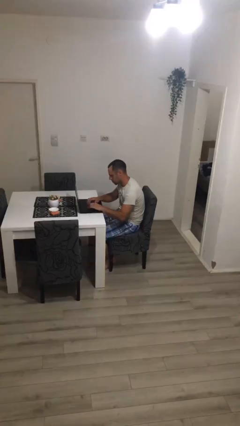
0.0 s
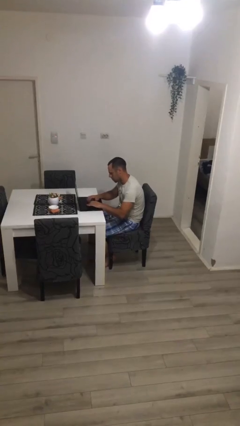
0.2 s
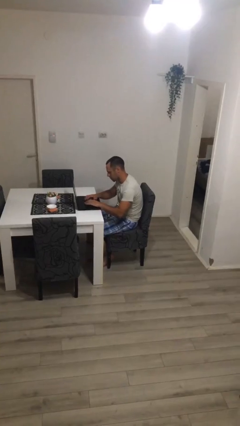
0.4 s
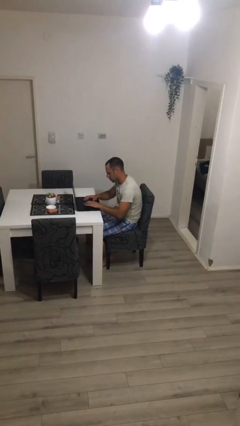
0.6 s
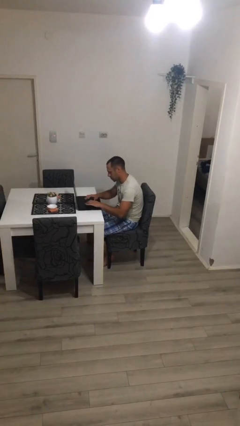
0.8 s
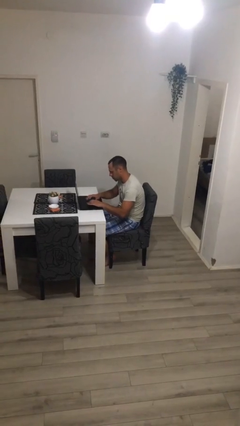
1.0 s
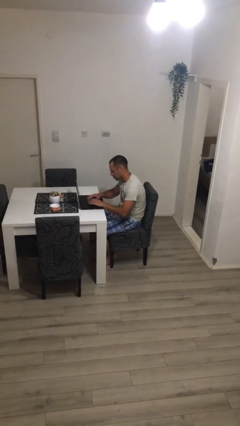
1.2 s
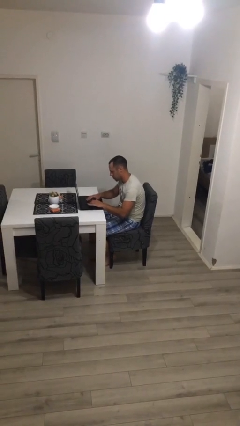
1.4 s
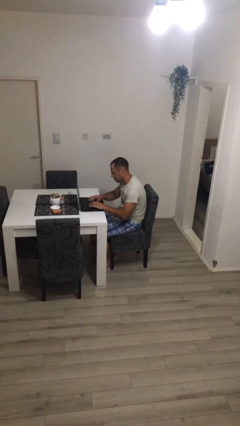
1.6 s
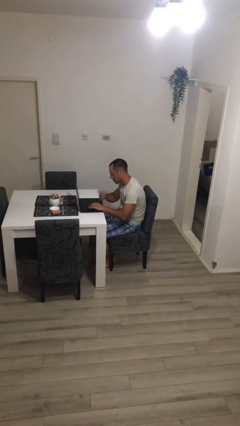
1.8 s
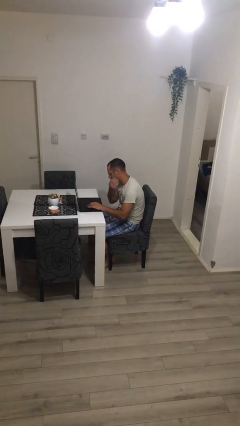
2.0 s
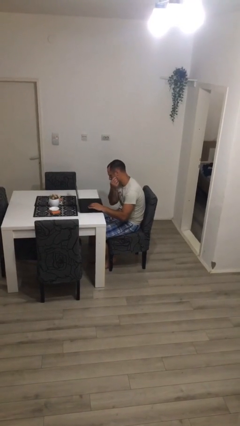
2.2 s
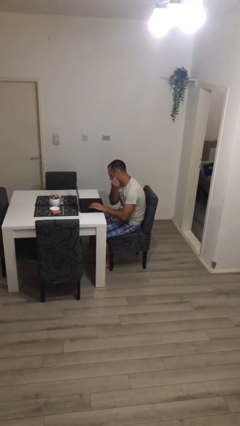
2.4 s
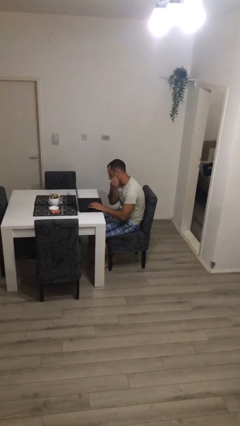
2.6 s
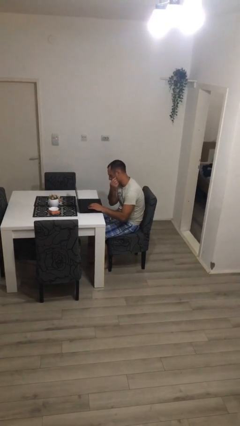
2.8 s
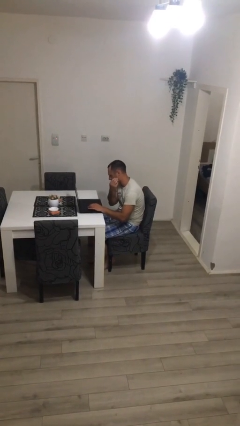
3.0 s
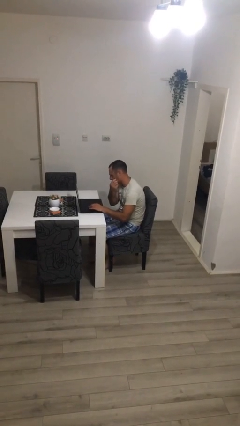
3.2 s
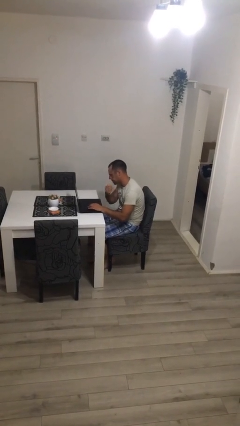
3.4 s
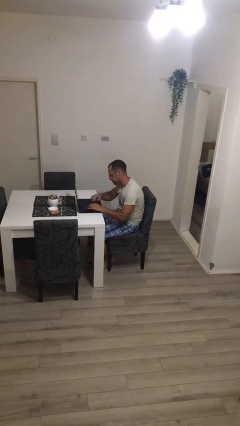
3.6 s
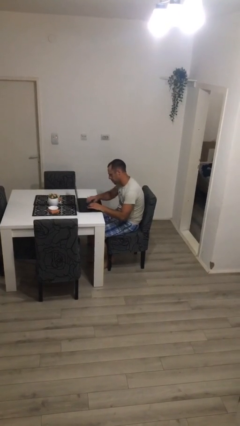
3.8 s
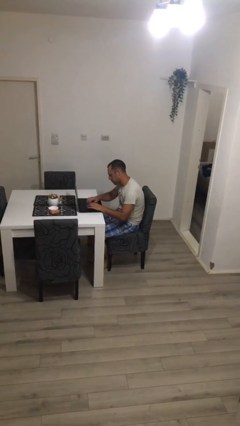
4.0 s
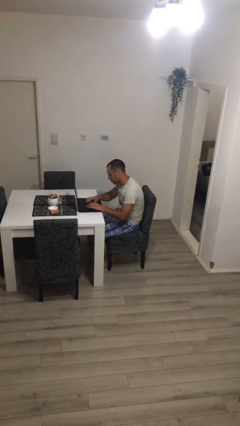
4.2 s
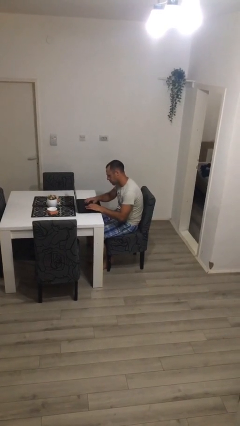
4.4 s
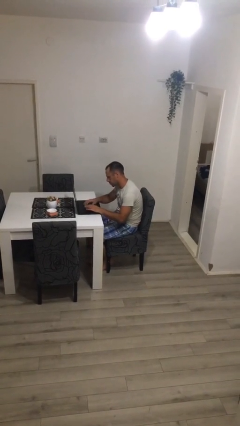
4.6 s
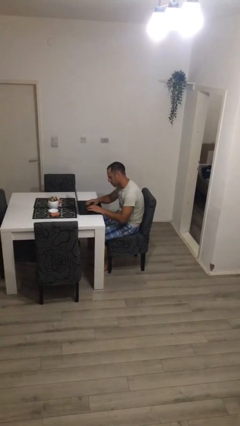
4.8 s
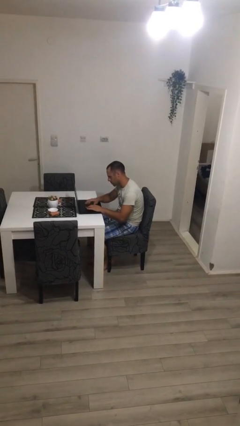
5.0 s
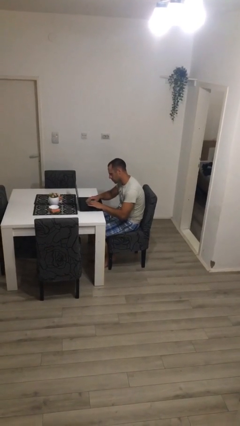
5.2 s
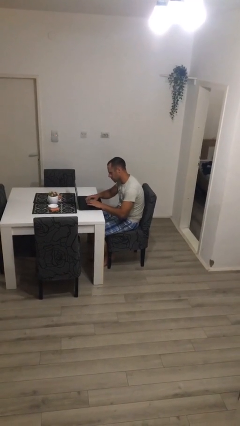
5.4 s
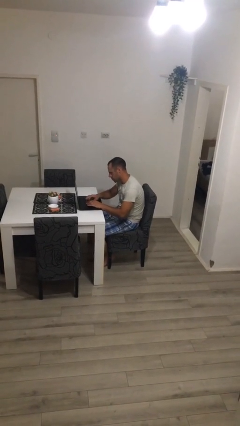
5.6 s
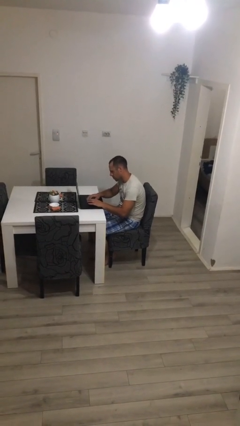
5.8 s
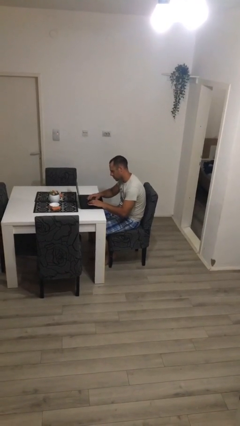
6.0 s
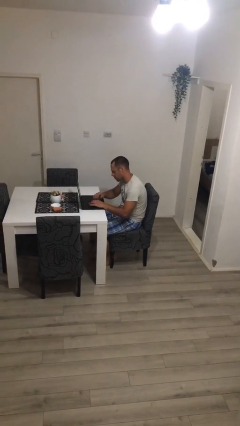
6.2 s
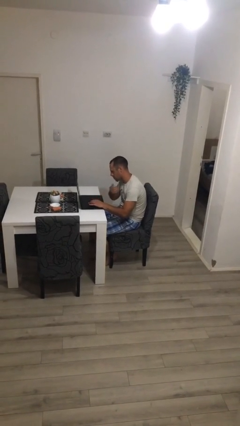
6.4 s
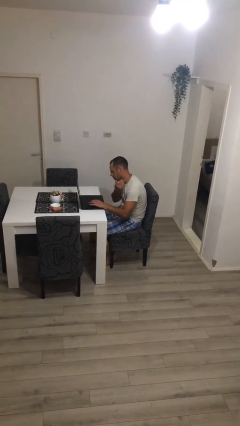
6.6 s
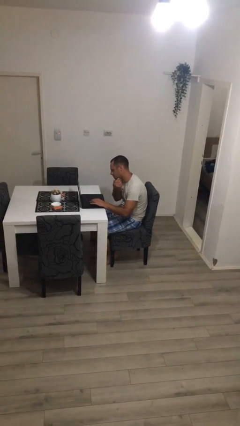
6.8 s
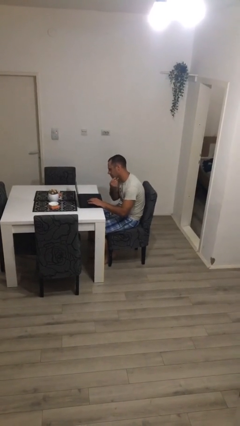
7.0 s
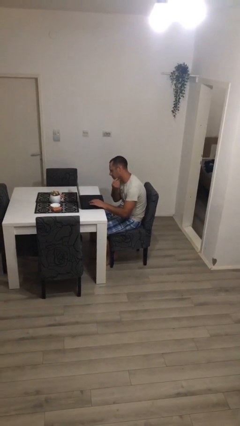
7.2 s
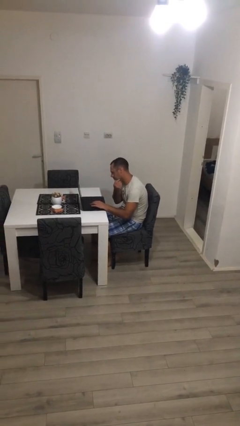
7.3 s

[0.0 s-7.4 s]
person interacts with laptop

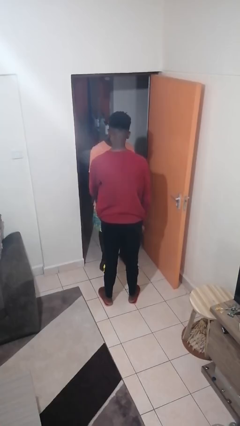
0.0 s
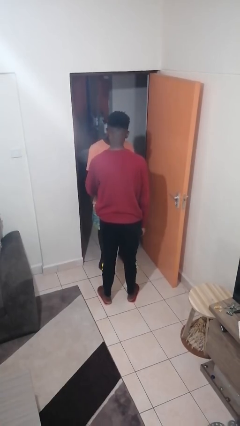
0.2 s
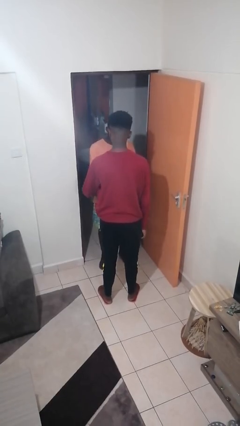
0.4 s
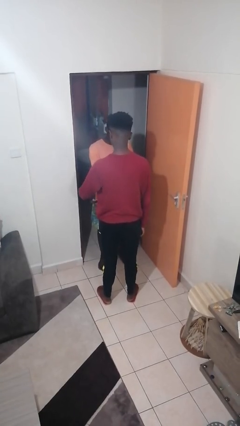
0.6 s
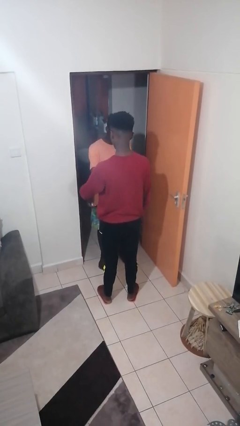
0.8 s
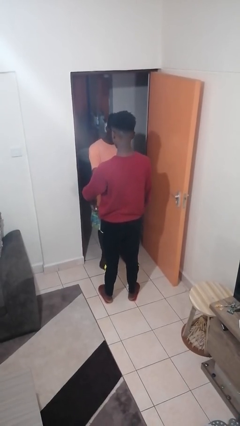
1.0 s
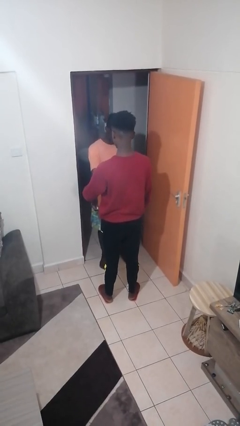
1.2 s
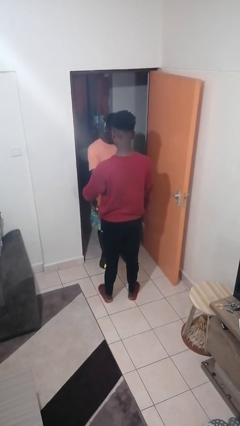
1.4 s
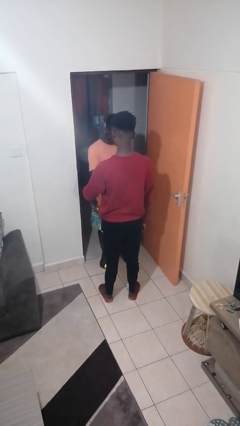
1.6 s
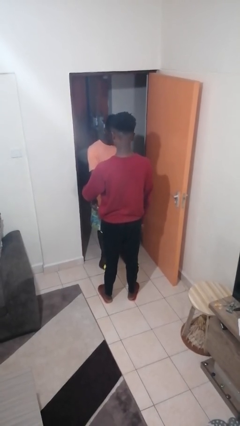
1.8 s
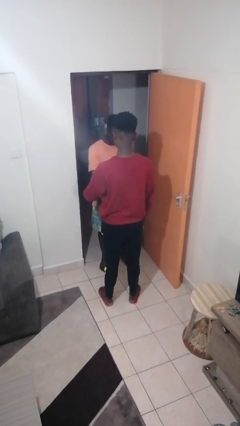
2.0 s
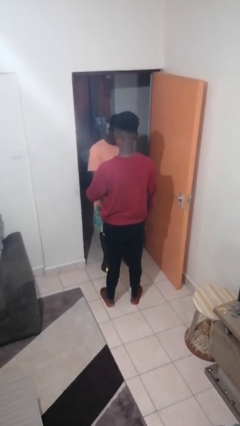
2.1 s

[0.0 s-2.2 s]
person grabs person by forearm

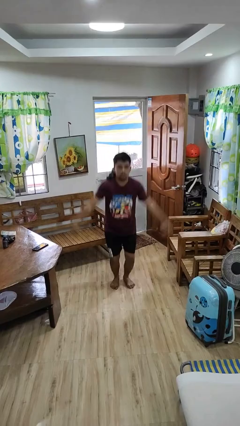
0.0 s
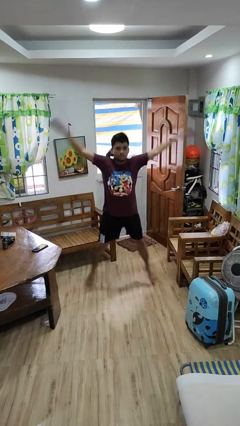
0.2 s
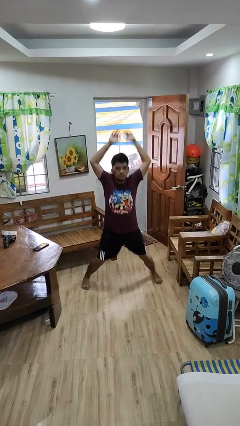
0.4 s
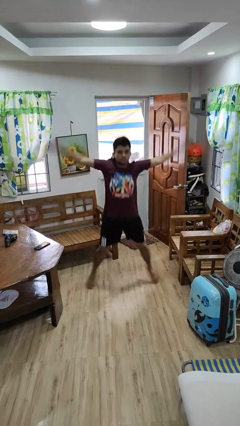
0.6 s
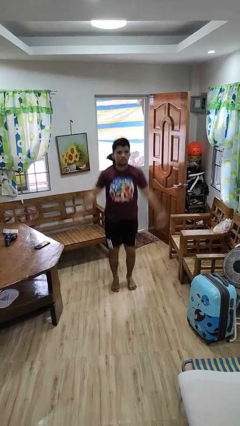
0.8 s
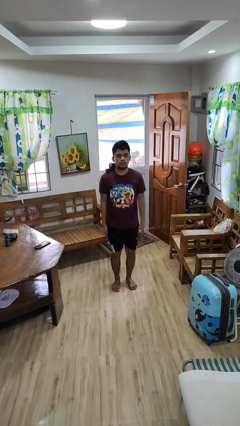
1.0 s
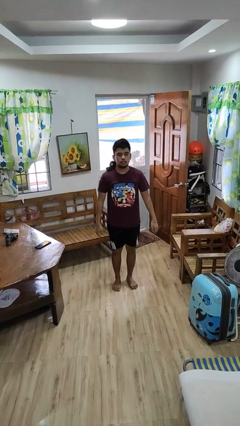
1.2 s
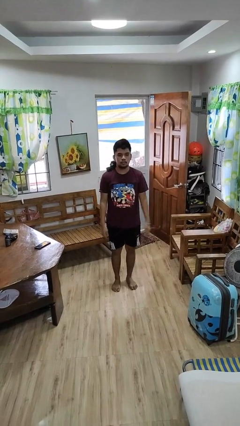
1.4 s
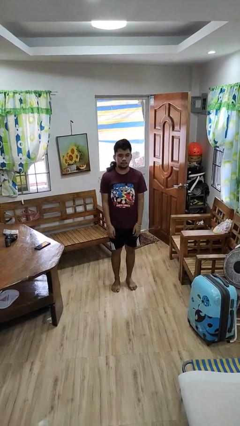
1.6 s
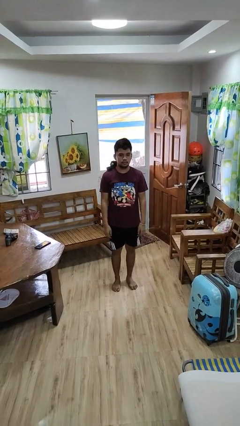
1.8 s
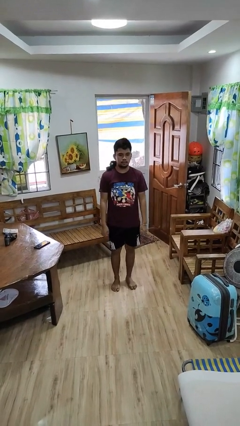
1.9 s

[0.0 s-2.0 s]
person exercises with jumping jacks

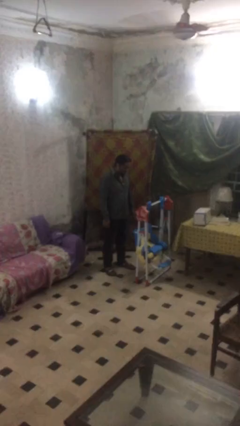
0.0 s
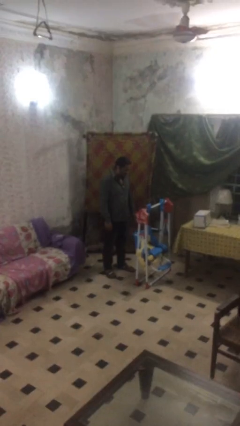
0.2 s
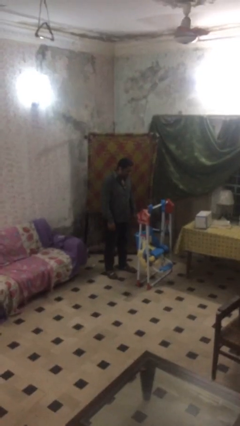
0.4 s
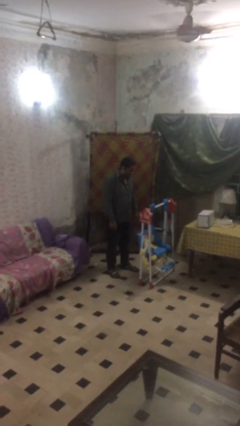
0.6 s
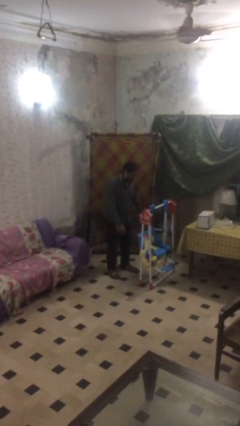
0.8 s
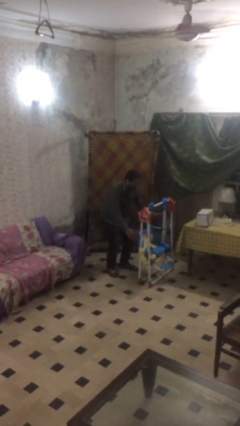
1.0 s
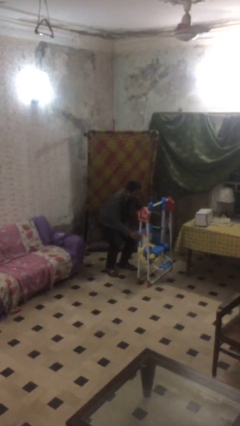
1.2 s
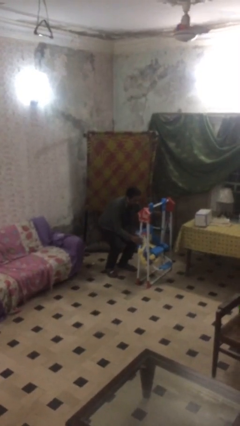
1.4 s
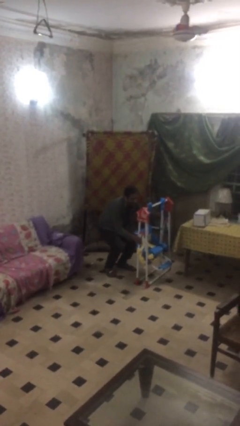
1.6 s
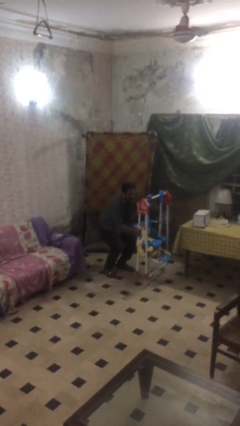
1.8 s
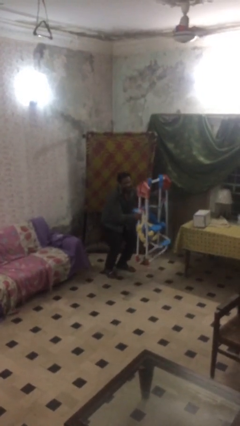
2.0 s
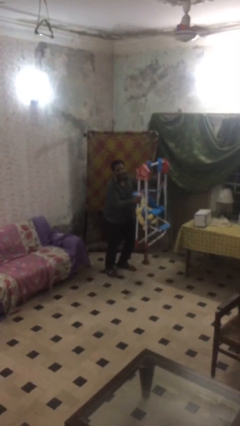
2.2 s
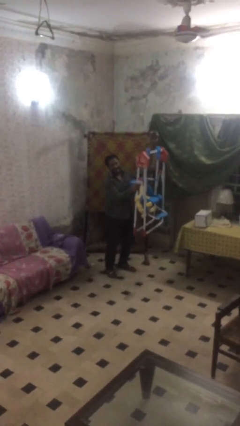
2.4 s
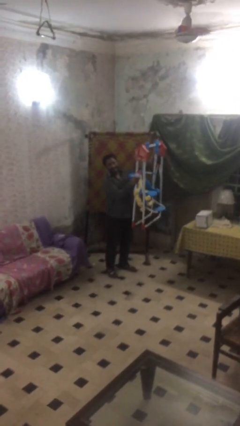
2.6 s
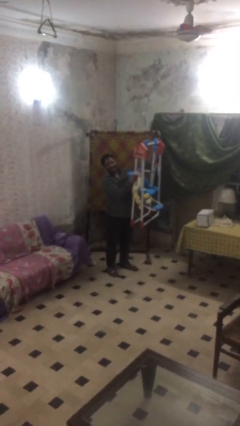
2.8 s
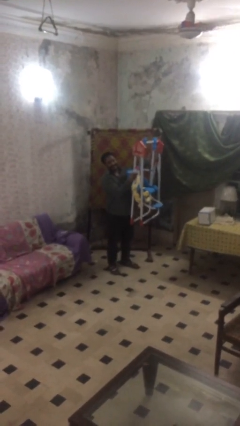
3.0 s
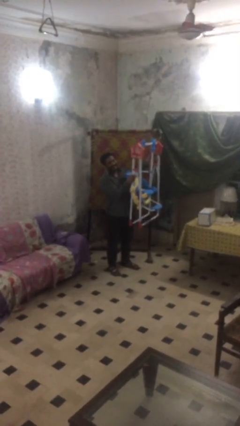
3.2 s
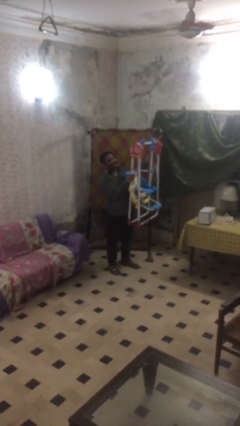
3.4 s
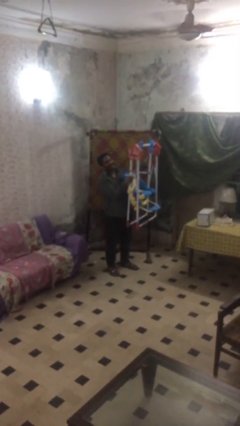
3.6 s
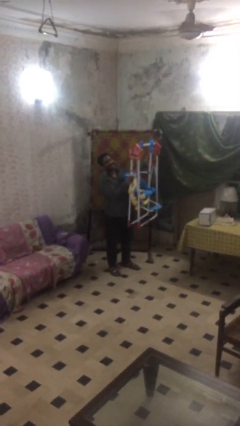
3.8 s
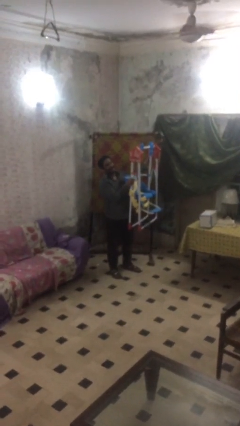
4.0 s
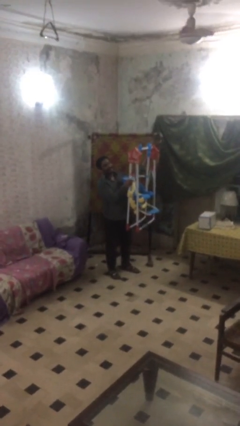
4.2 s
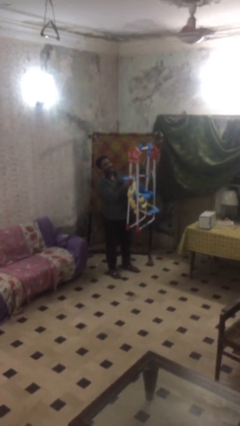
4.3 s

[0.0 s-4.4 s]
person picks up object from floor

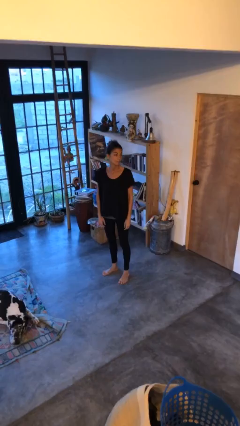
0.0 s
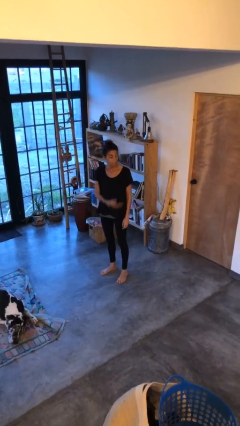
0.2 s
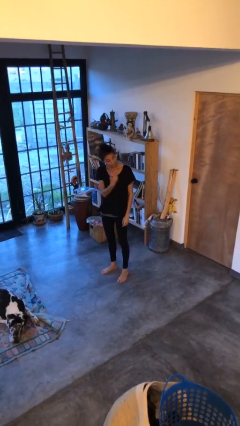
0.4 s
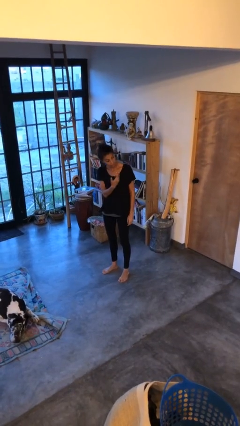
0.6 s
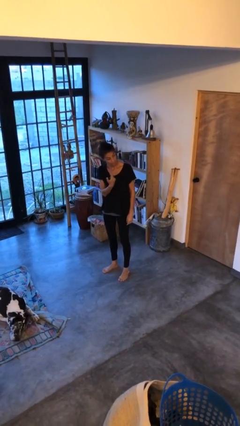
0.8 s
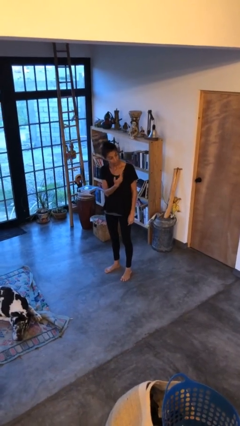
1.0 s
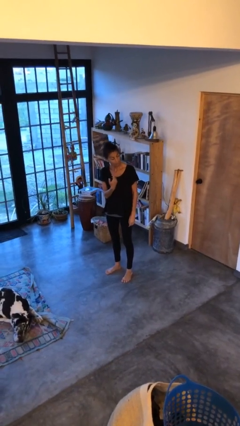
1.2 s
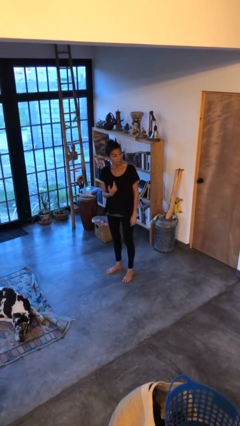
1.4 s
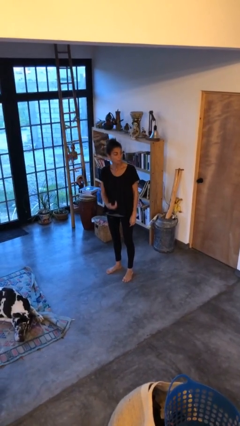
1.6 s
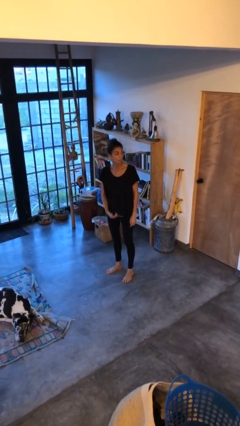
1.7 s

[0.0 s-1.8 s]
person gestures come here
